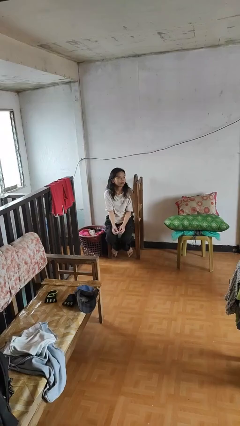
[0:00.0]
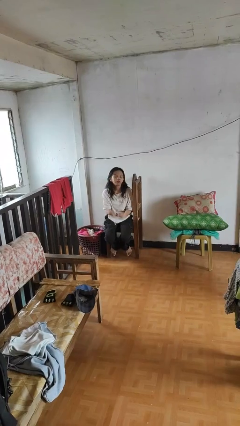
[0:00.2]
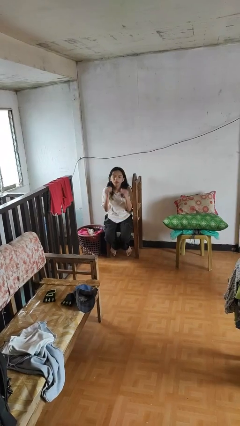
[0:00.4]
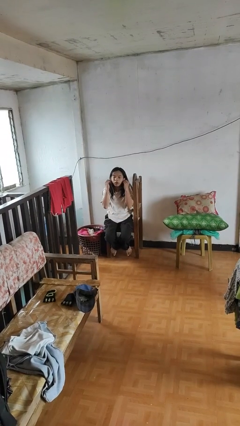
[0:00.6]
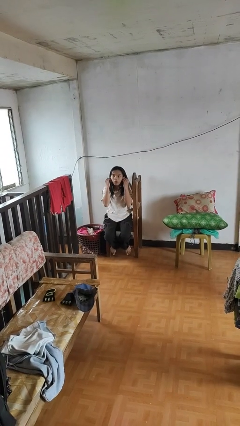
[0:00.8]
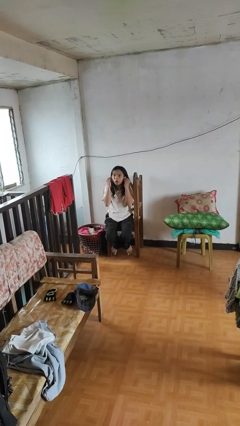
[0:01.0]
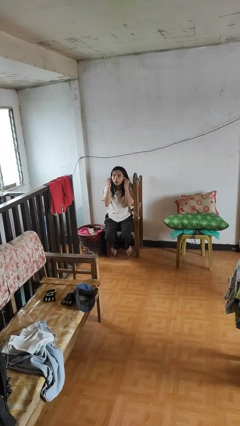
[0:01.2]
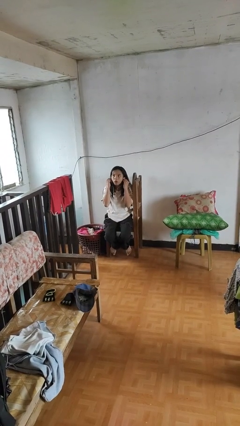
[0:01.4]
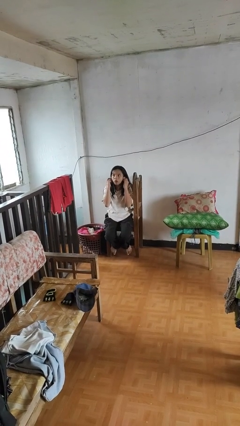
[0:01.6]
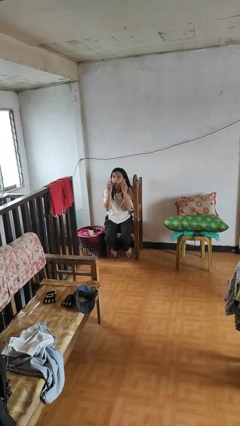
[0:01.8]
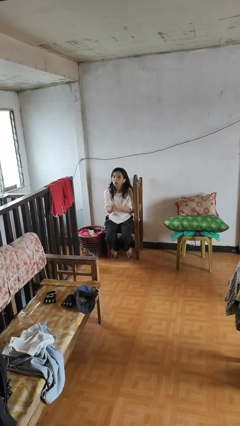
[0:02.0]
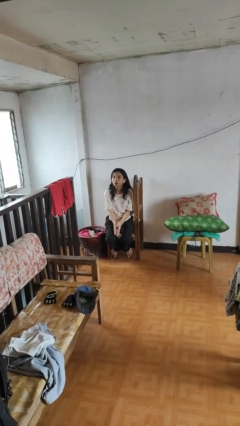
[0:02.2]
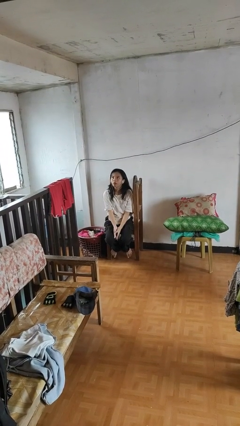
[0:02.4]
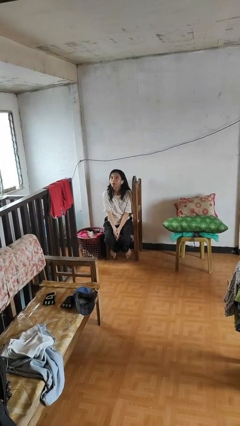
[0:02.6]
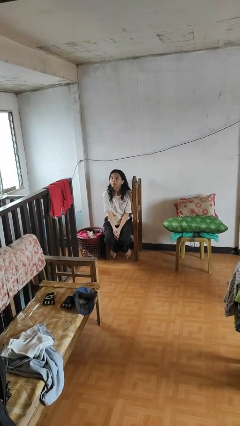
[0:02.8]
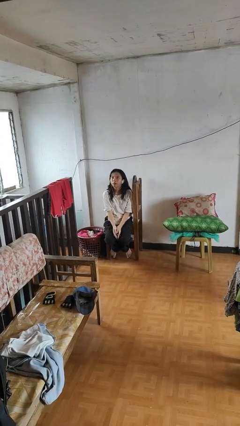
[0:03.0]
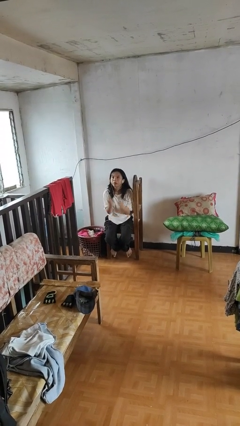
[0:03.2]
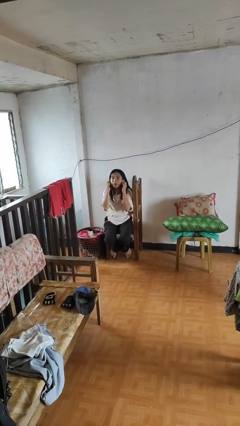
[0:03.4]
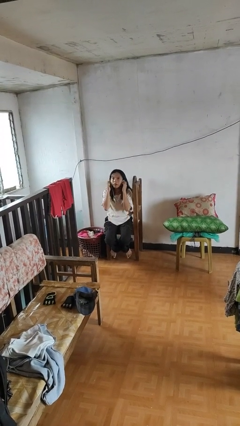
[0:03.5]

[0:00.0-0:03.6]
person puts on headphones

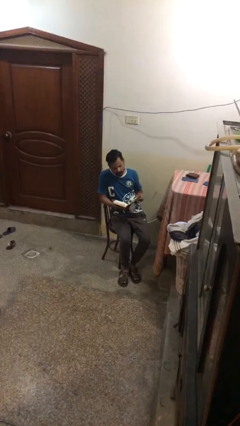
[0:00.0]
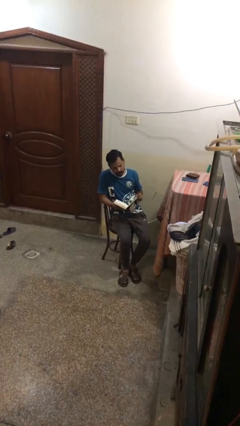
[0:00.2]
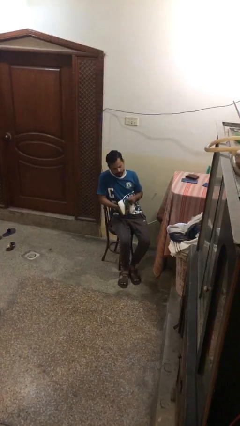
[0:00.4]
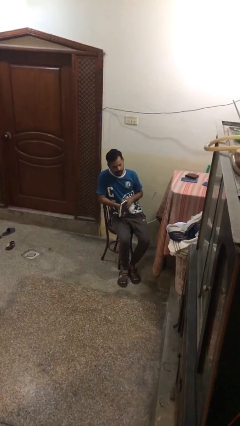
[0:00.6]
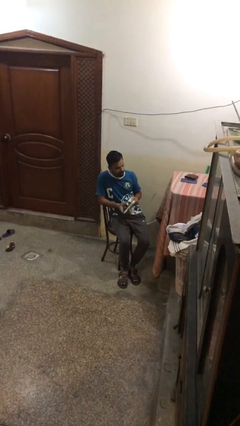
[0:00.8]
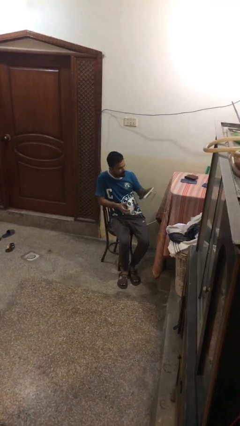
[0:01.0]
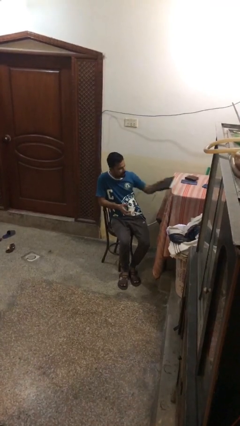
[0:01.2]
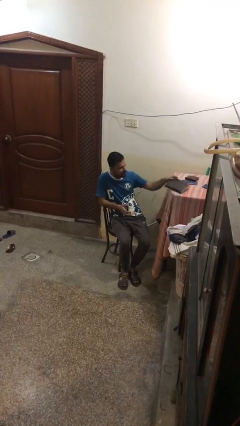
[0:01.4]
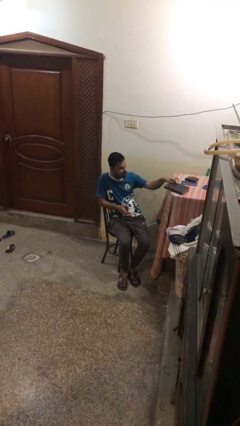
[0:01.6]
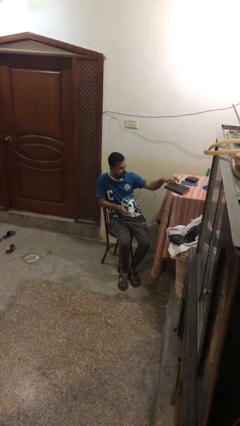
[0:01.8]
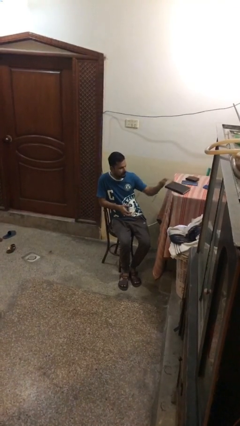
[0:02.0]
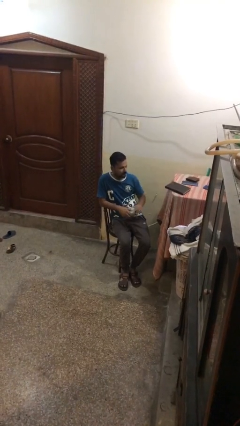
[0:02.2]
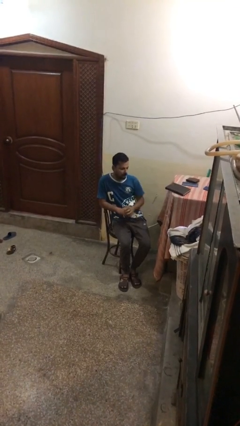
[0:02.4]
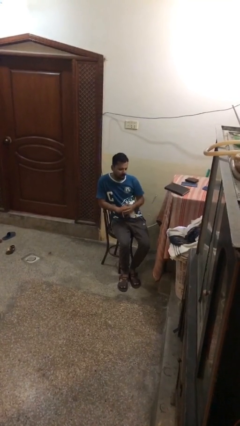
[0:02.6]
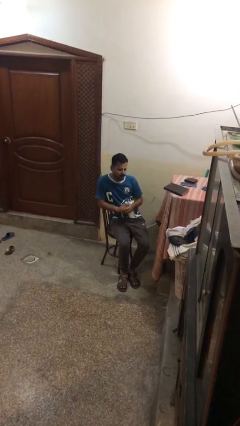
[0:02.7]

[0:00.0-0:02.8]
person puts down object on table

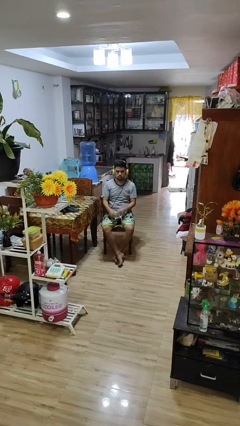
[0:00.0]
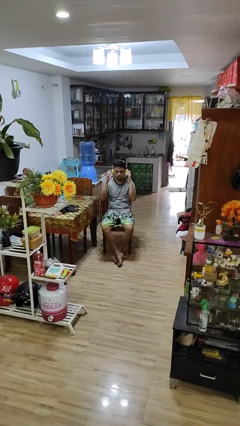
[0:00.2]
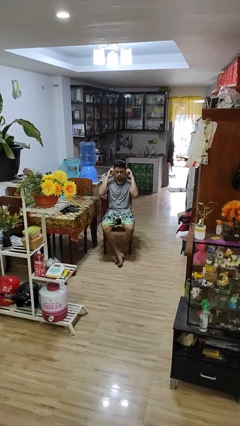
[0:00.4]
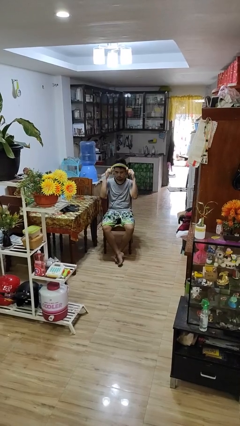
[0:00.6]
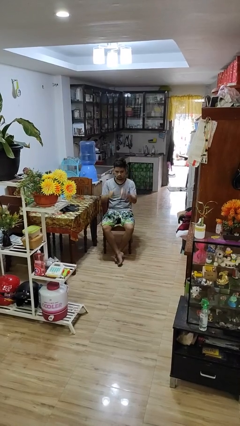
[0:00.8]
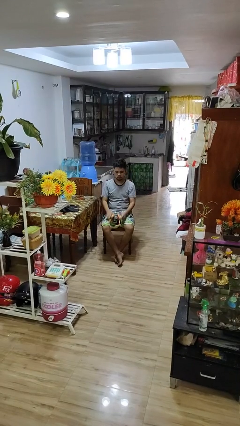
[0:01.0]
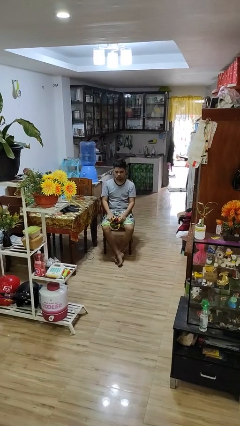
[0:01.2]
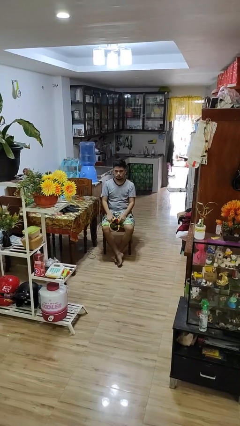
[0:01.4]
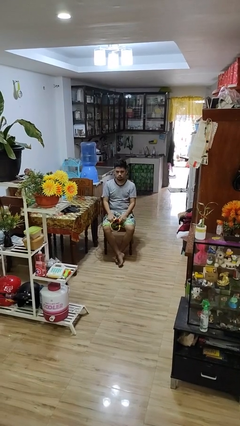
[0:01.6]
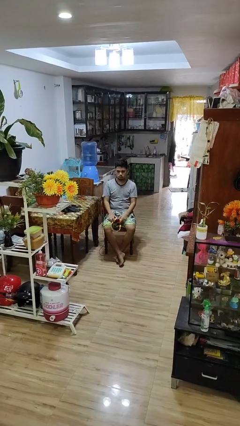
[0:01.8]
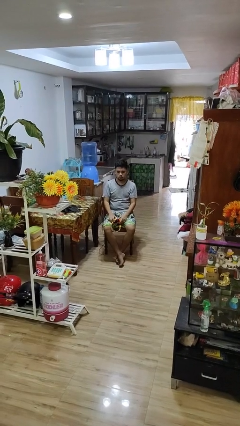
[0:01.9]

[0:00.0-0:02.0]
person takes off headphones

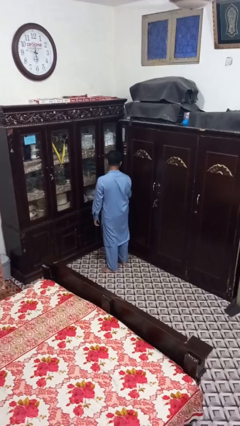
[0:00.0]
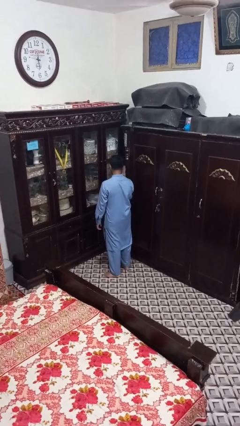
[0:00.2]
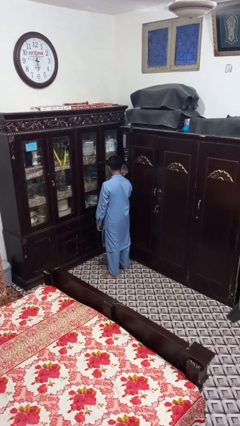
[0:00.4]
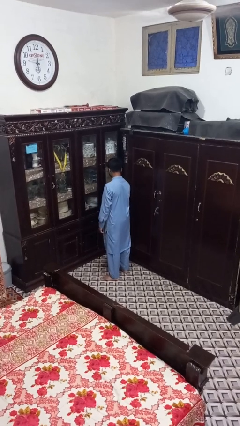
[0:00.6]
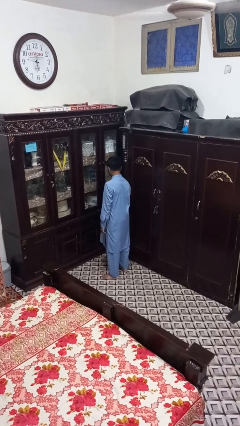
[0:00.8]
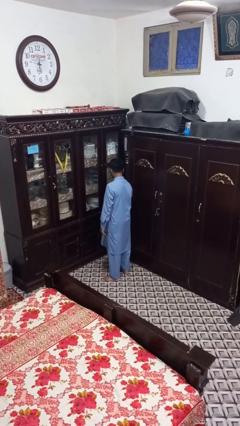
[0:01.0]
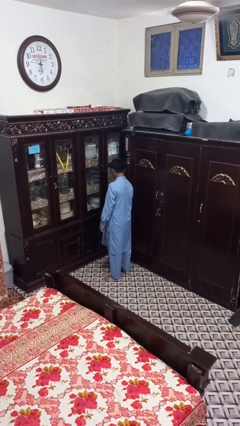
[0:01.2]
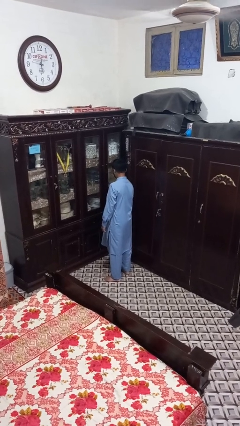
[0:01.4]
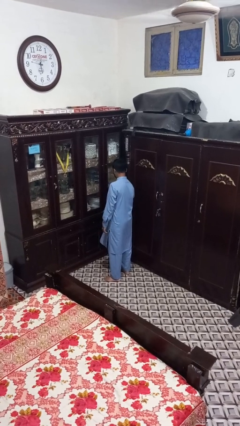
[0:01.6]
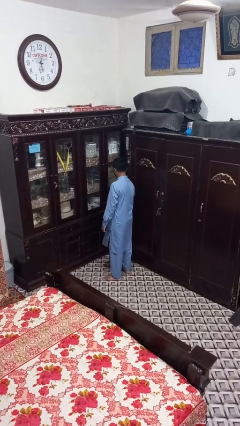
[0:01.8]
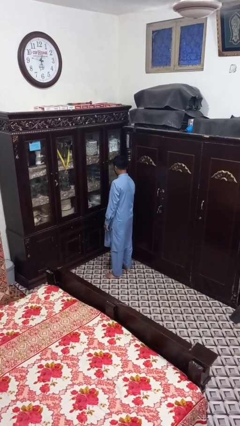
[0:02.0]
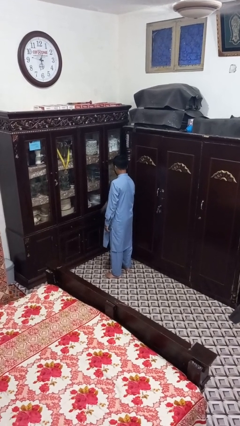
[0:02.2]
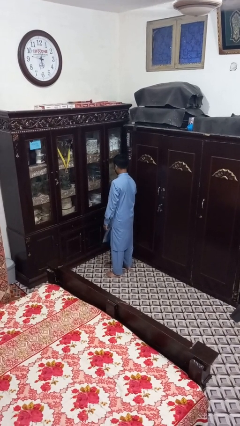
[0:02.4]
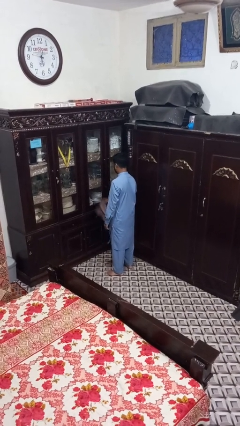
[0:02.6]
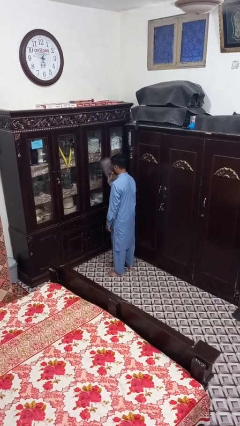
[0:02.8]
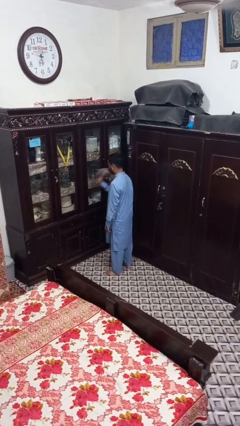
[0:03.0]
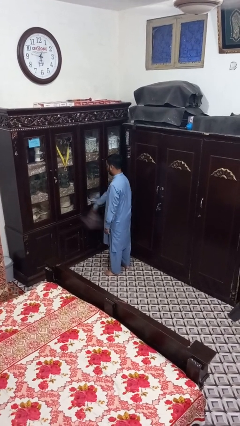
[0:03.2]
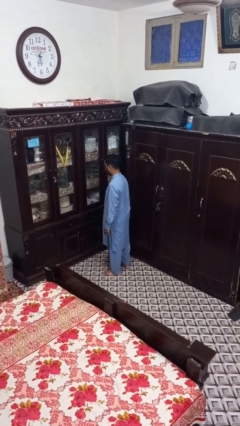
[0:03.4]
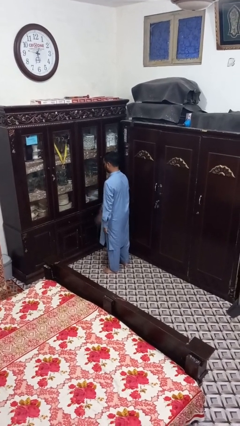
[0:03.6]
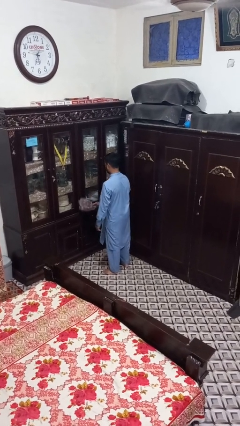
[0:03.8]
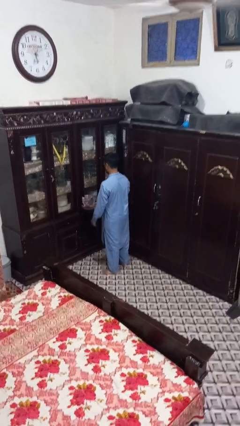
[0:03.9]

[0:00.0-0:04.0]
person dusts furniture

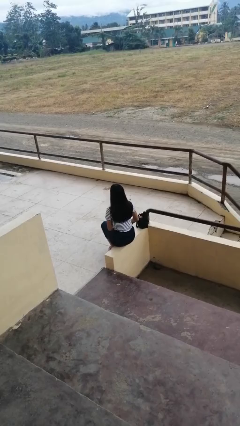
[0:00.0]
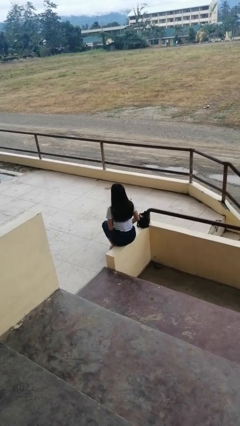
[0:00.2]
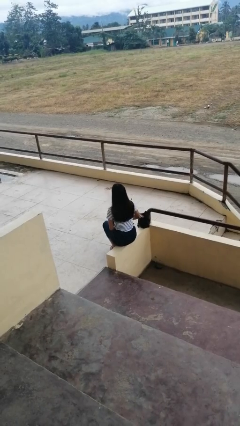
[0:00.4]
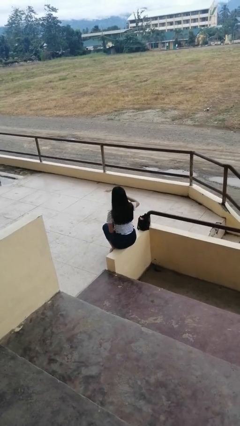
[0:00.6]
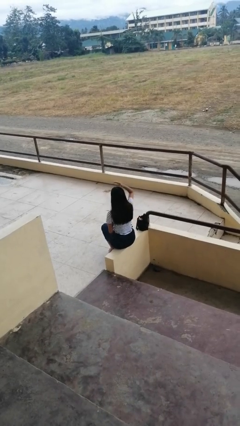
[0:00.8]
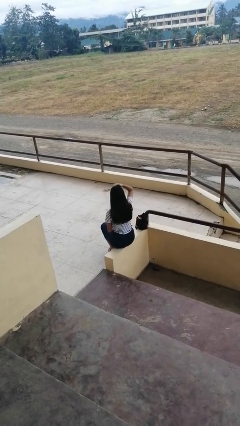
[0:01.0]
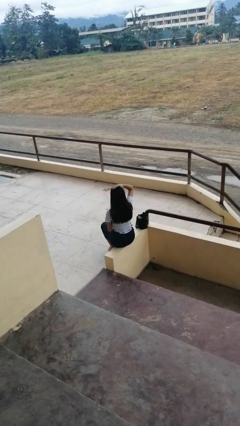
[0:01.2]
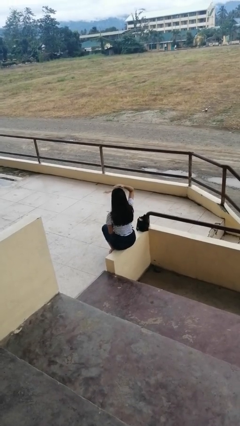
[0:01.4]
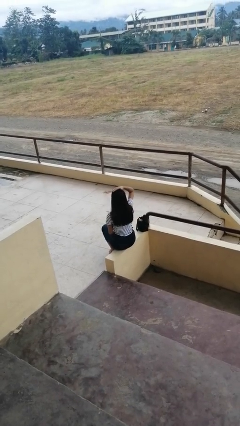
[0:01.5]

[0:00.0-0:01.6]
person pats head

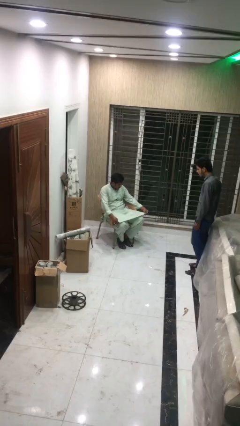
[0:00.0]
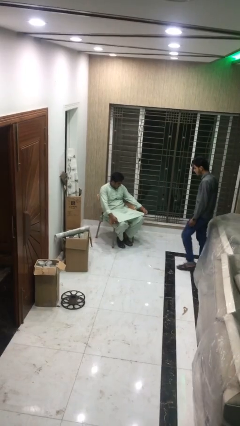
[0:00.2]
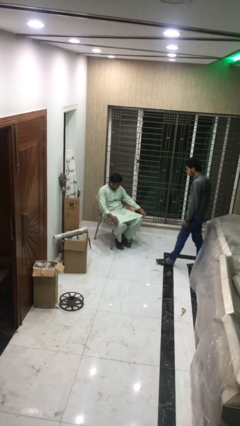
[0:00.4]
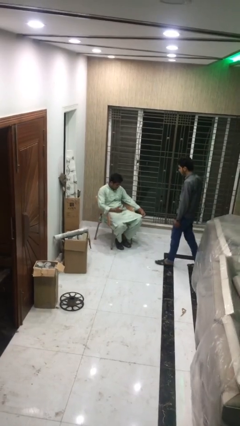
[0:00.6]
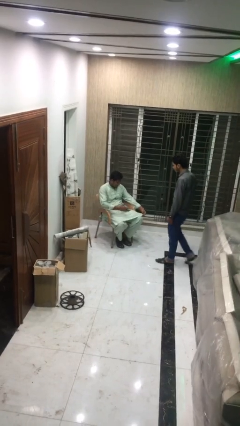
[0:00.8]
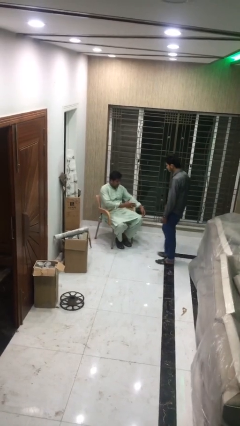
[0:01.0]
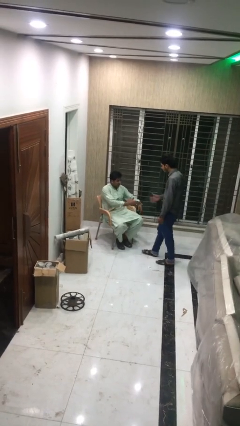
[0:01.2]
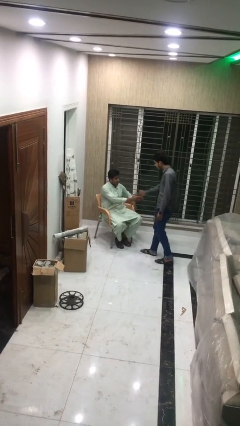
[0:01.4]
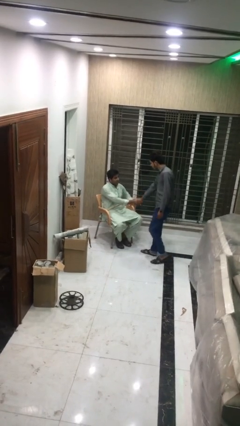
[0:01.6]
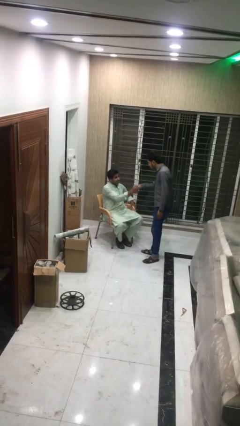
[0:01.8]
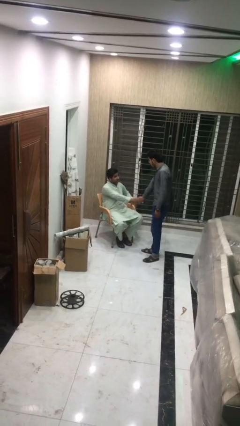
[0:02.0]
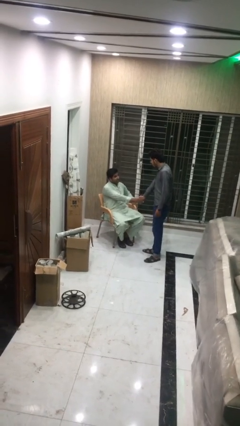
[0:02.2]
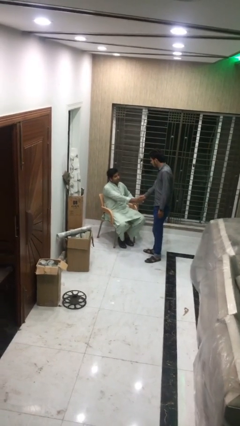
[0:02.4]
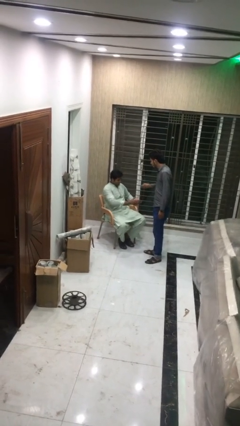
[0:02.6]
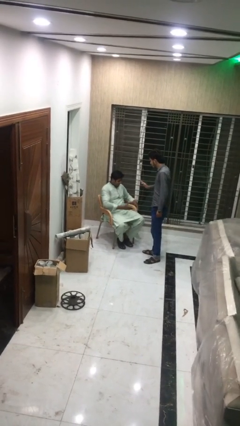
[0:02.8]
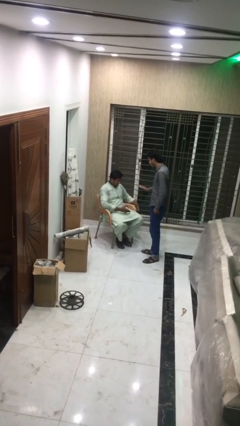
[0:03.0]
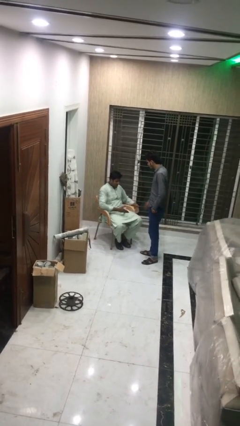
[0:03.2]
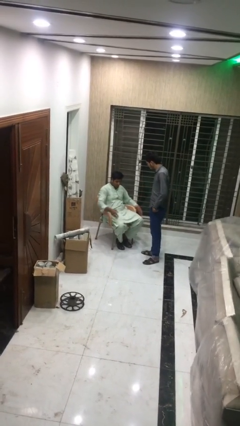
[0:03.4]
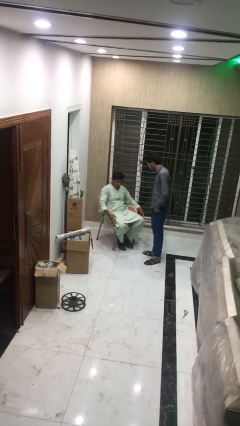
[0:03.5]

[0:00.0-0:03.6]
person shakes hand
